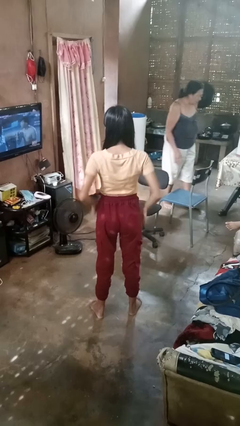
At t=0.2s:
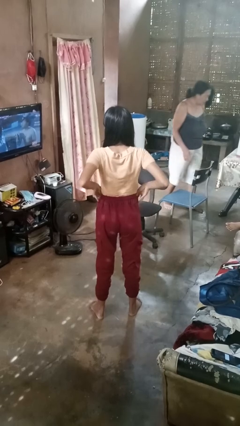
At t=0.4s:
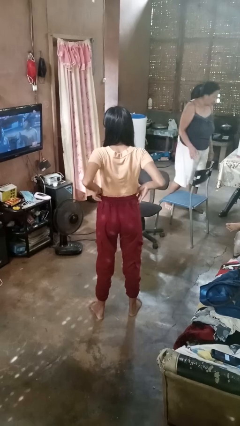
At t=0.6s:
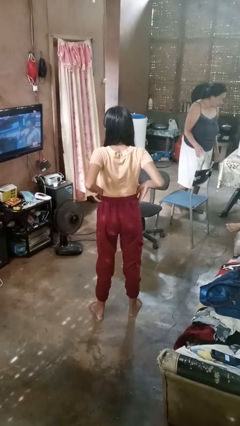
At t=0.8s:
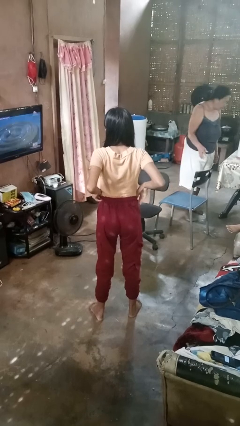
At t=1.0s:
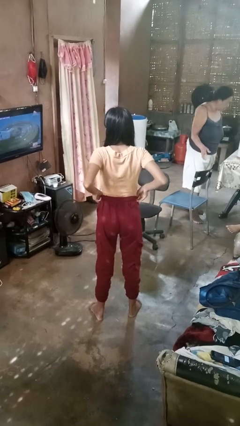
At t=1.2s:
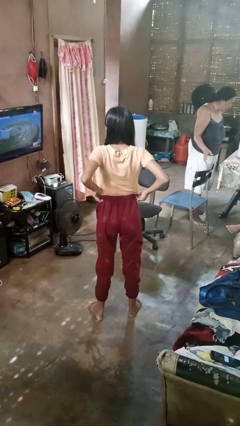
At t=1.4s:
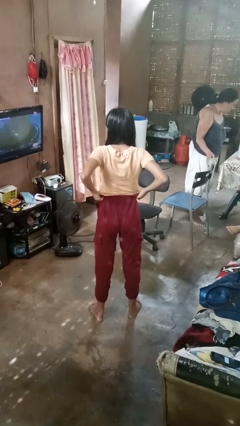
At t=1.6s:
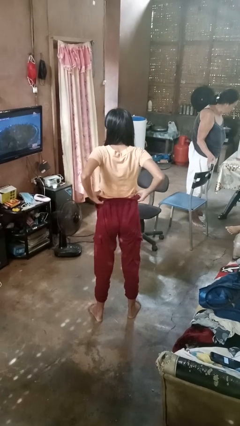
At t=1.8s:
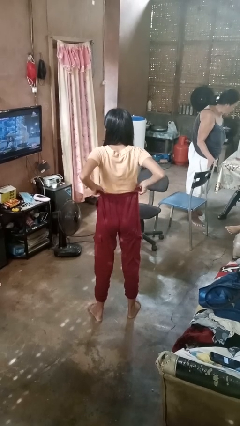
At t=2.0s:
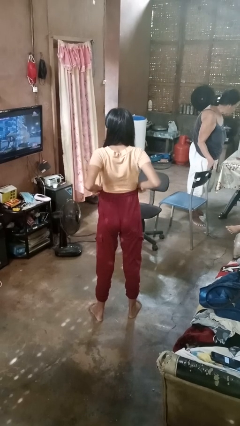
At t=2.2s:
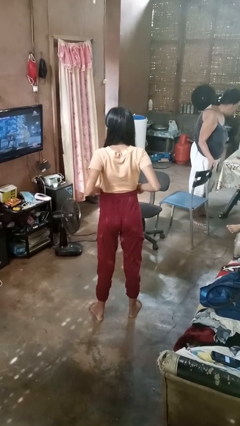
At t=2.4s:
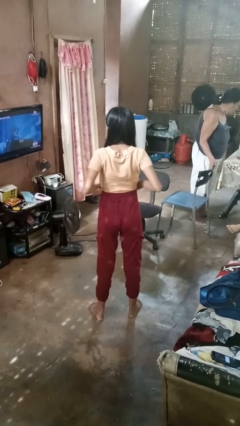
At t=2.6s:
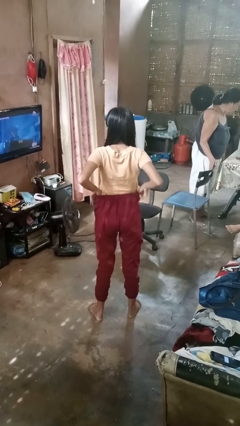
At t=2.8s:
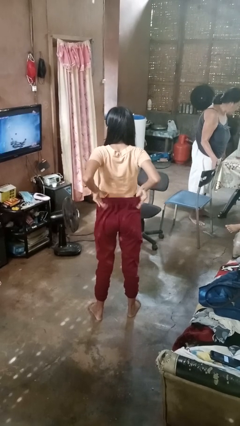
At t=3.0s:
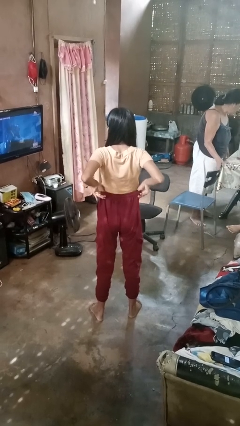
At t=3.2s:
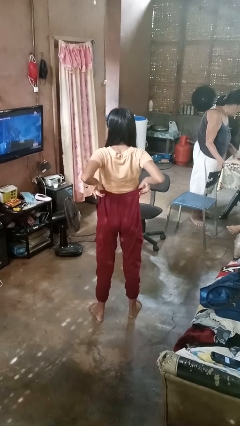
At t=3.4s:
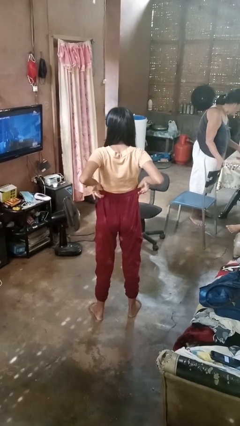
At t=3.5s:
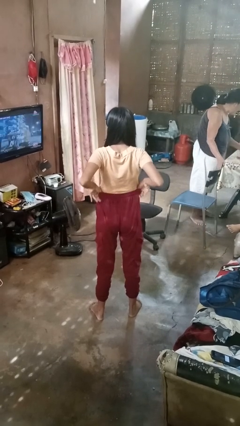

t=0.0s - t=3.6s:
person hikes up pants

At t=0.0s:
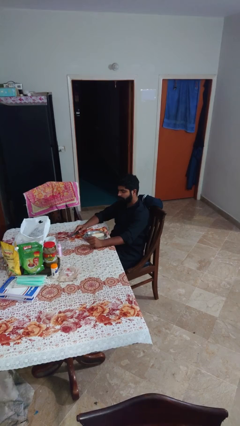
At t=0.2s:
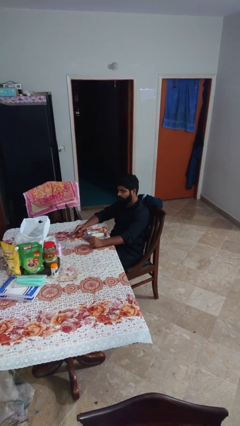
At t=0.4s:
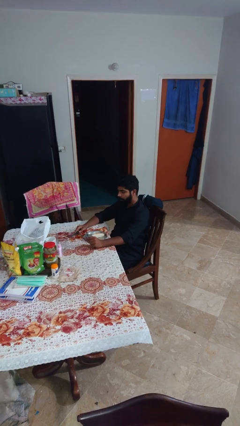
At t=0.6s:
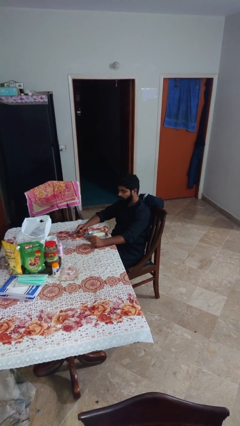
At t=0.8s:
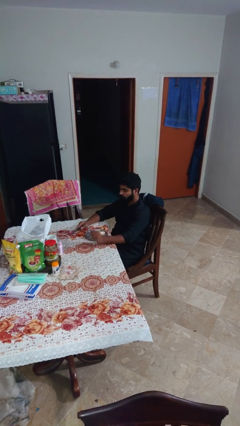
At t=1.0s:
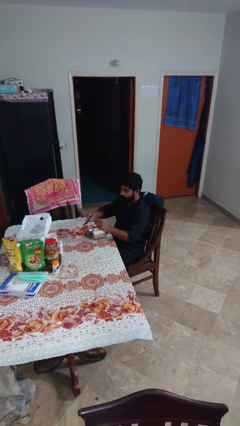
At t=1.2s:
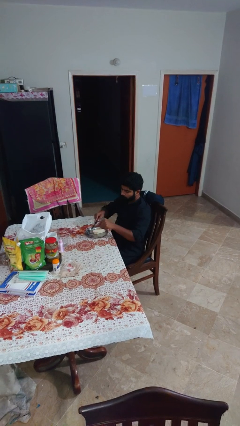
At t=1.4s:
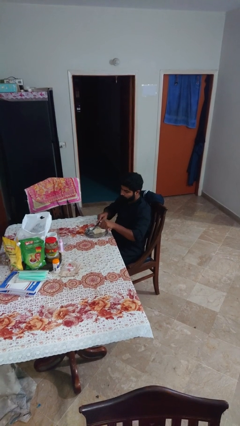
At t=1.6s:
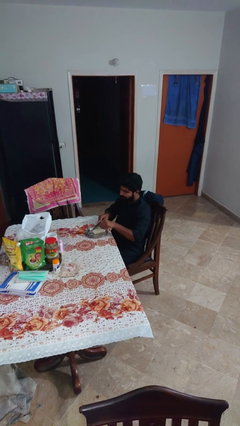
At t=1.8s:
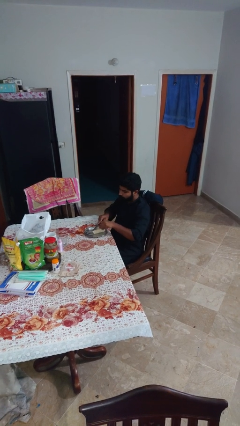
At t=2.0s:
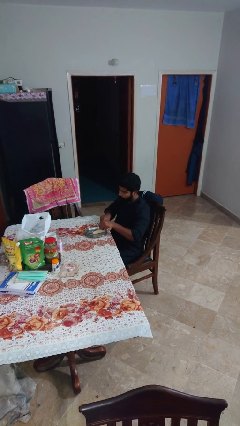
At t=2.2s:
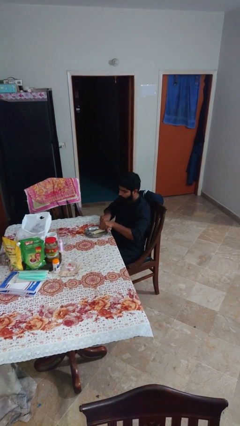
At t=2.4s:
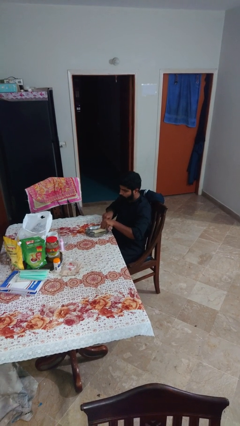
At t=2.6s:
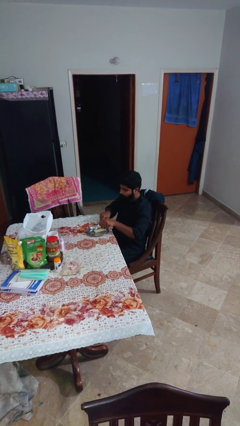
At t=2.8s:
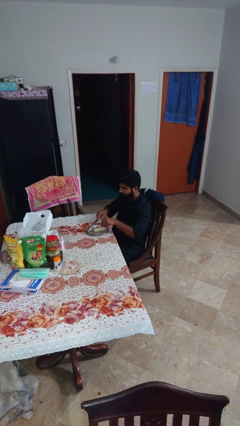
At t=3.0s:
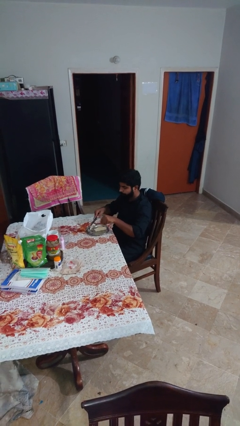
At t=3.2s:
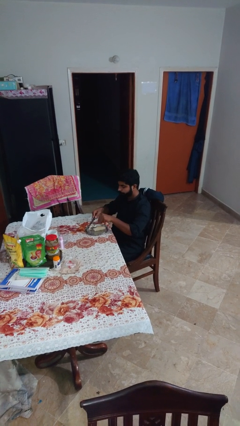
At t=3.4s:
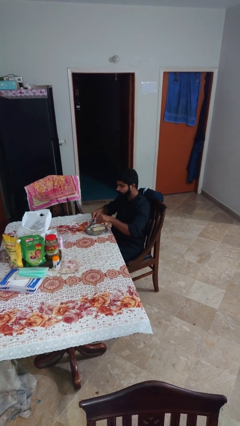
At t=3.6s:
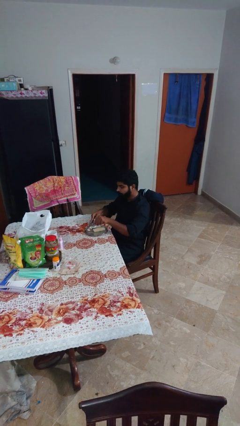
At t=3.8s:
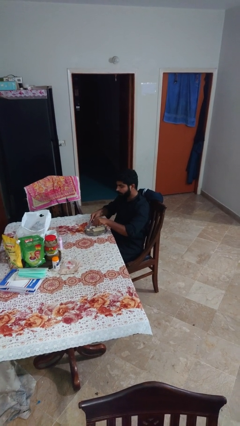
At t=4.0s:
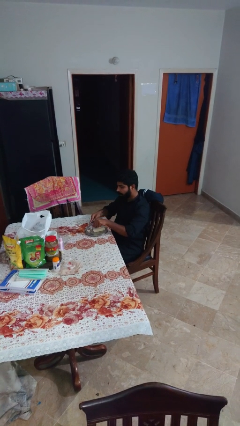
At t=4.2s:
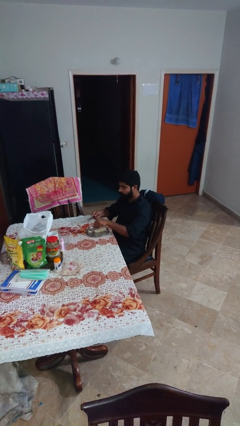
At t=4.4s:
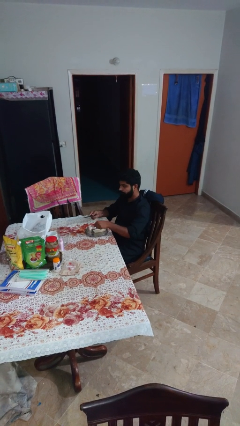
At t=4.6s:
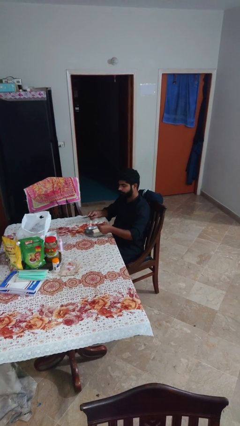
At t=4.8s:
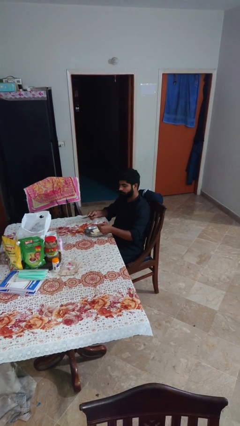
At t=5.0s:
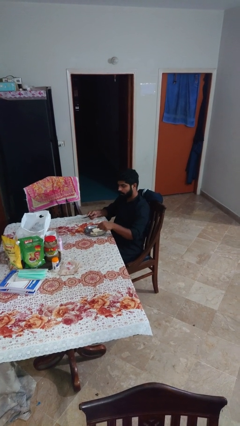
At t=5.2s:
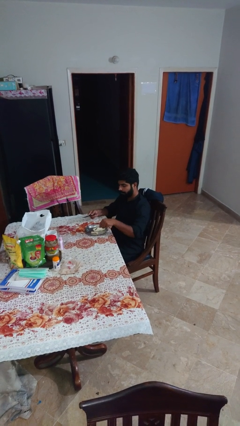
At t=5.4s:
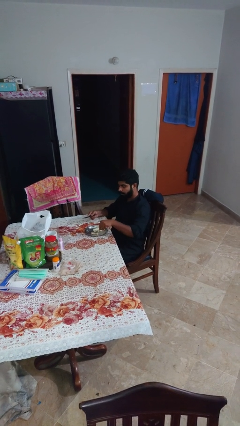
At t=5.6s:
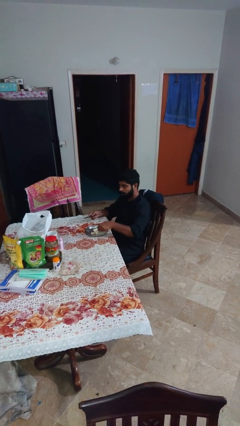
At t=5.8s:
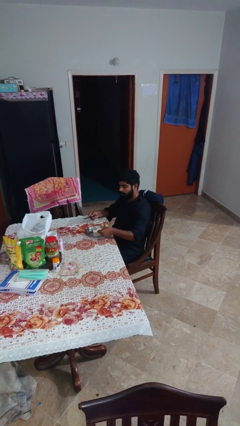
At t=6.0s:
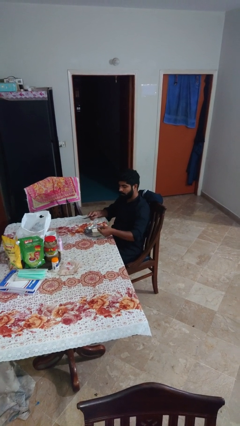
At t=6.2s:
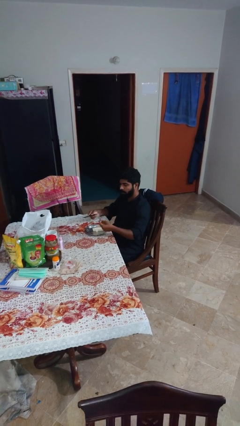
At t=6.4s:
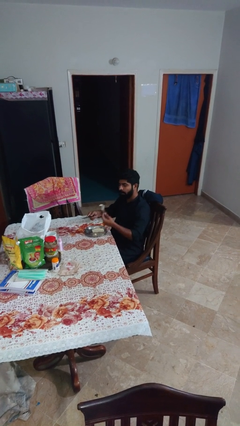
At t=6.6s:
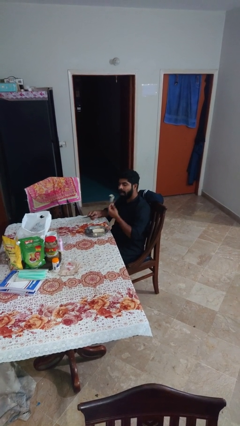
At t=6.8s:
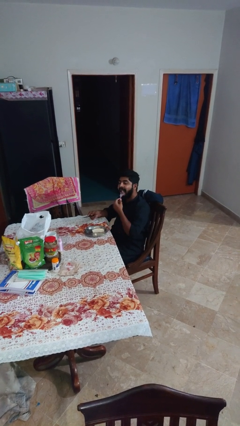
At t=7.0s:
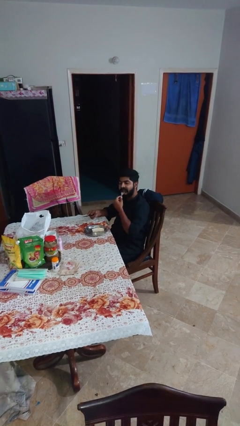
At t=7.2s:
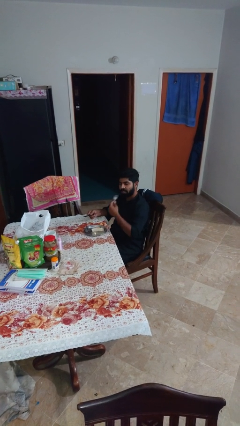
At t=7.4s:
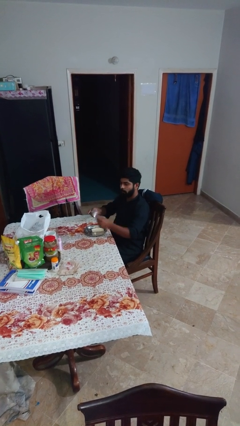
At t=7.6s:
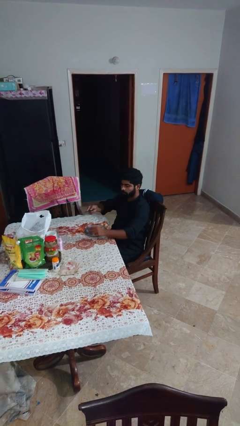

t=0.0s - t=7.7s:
person eats with utensil

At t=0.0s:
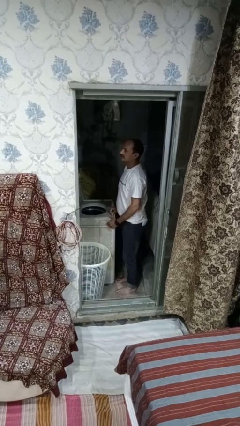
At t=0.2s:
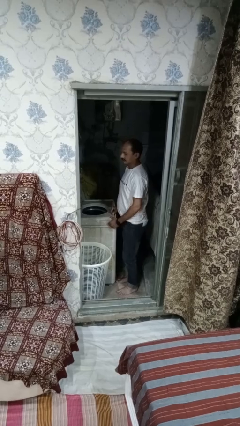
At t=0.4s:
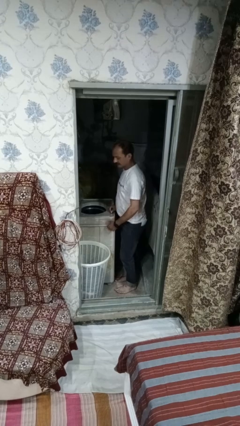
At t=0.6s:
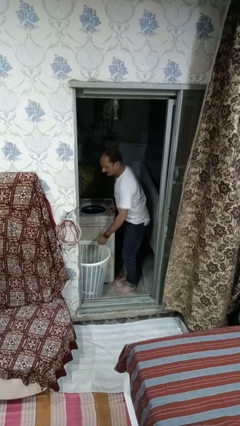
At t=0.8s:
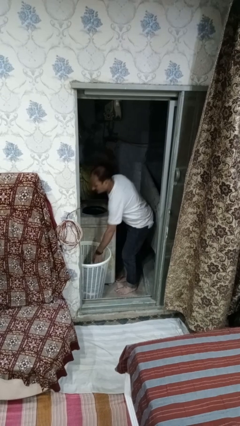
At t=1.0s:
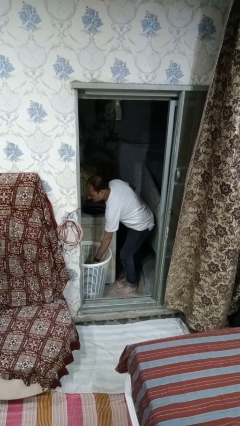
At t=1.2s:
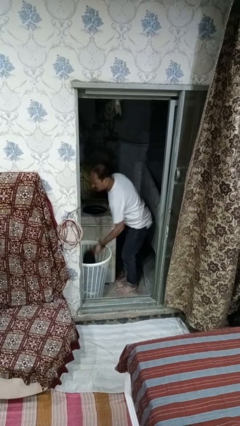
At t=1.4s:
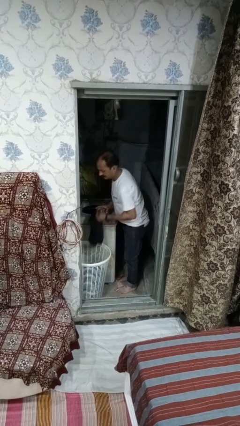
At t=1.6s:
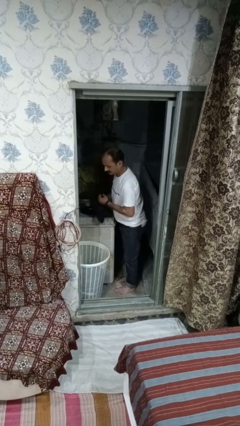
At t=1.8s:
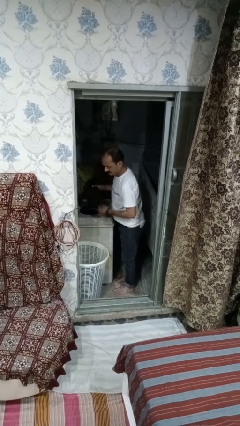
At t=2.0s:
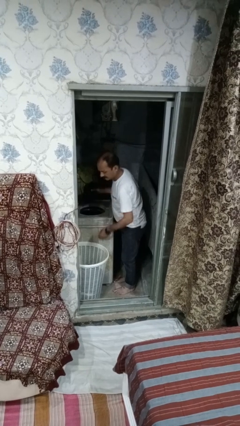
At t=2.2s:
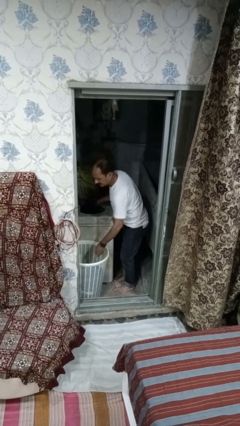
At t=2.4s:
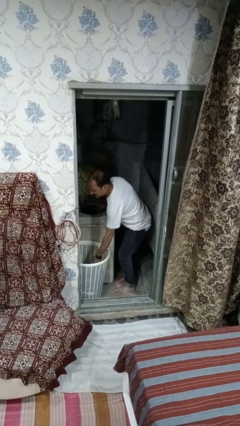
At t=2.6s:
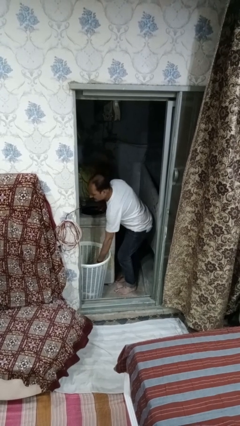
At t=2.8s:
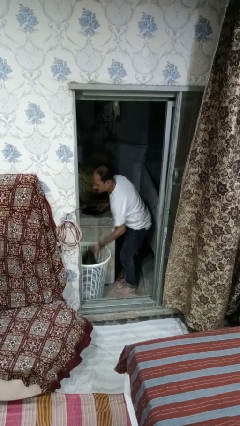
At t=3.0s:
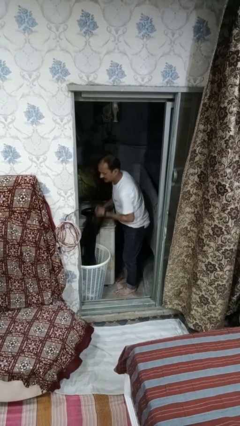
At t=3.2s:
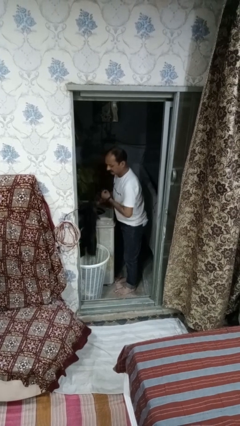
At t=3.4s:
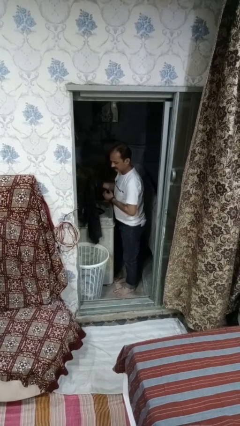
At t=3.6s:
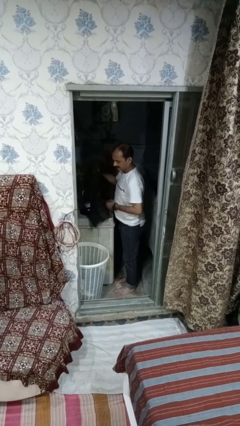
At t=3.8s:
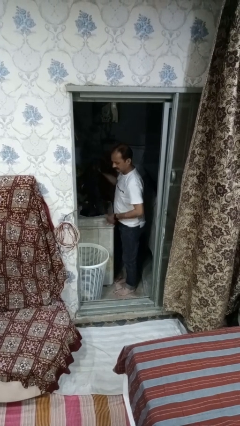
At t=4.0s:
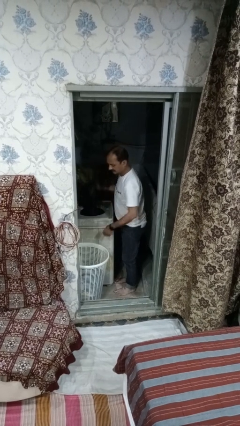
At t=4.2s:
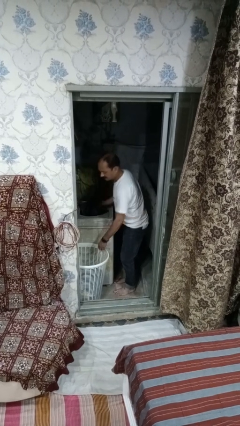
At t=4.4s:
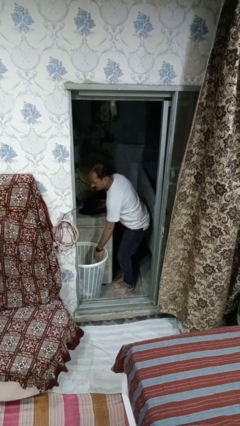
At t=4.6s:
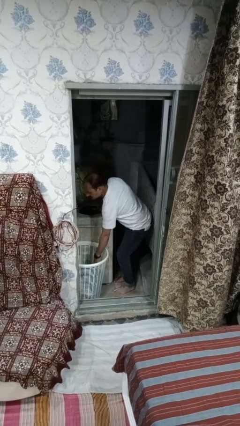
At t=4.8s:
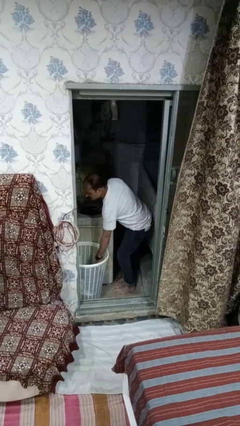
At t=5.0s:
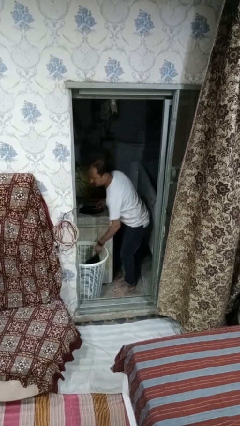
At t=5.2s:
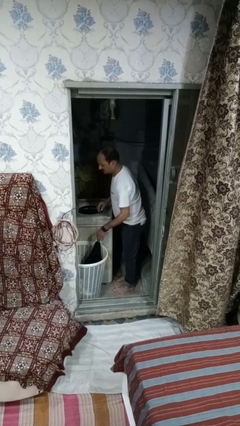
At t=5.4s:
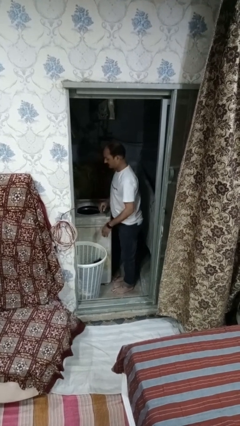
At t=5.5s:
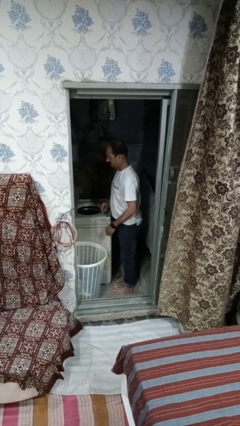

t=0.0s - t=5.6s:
person loads dryer

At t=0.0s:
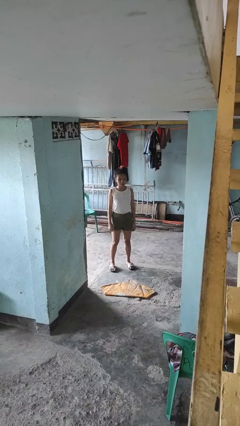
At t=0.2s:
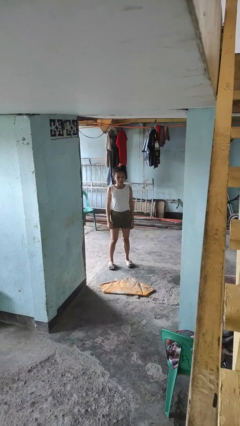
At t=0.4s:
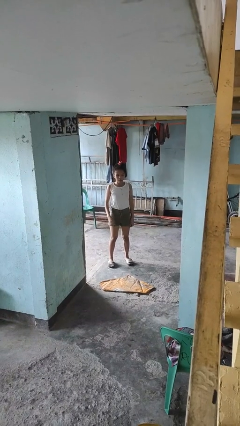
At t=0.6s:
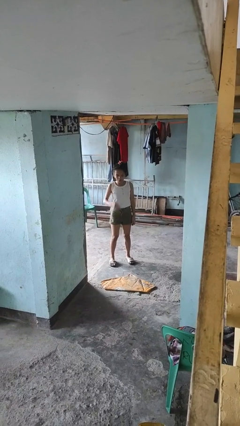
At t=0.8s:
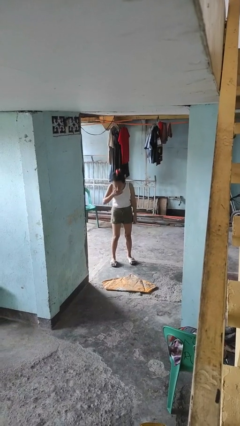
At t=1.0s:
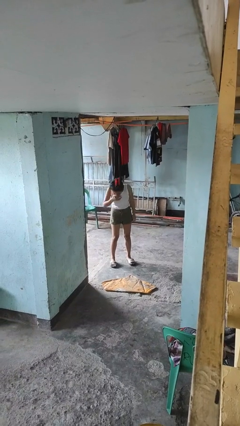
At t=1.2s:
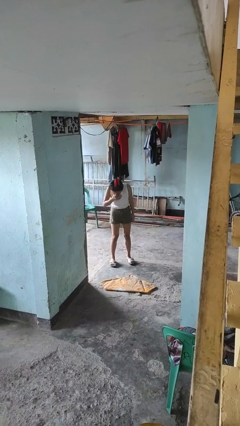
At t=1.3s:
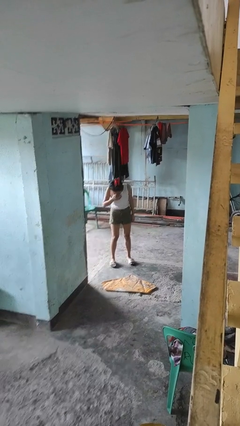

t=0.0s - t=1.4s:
person sneezes into hand
